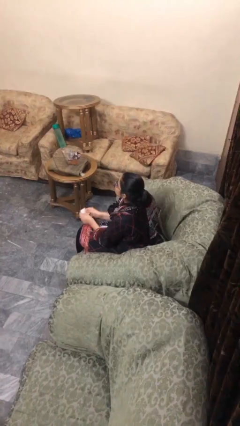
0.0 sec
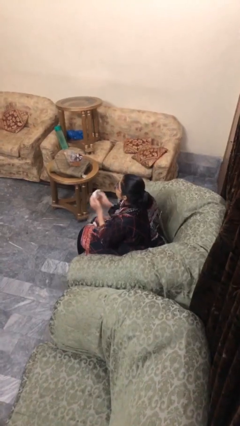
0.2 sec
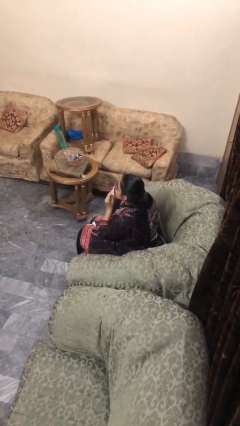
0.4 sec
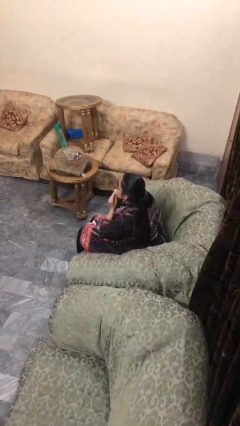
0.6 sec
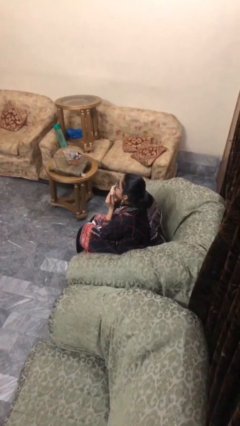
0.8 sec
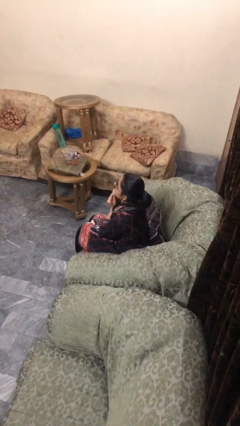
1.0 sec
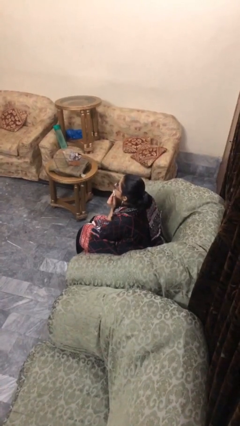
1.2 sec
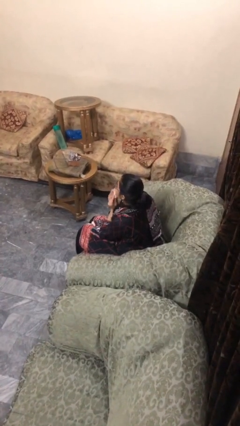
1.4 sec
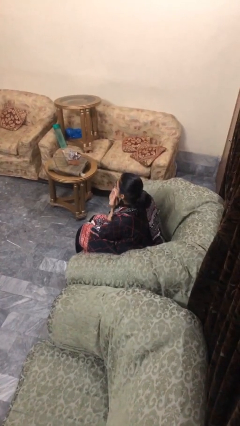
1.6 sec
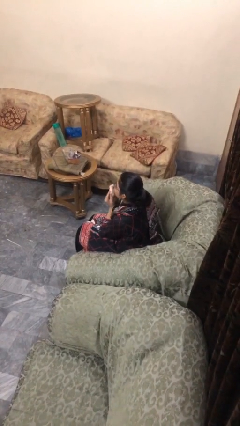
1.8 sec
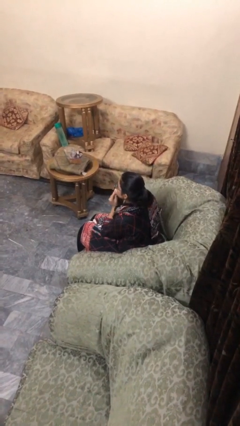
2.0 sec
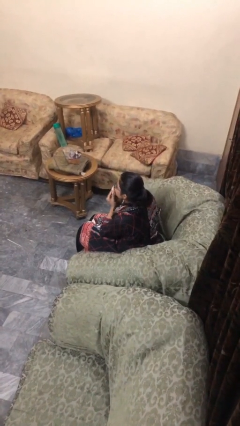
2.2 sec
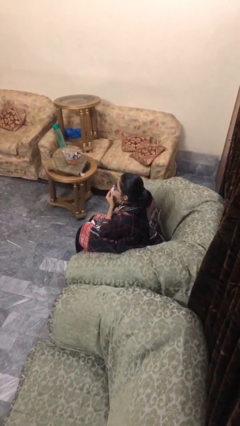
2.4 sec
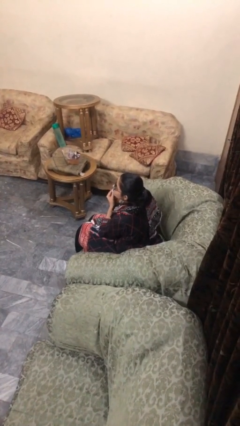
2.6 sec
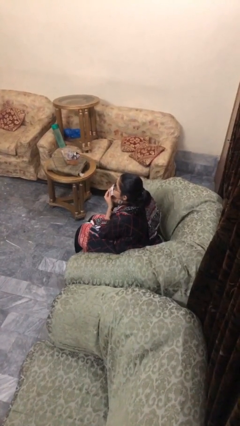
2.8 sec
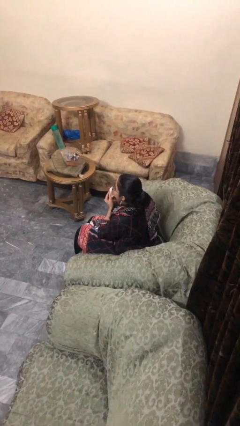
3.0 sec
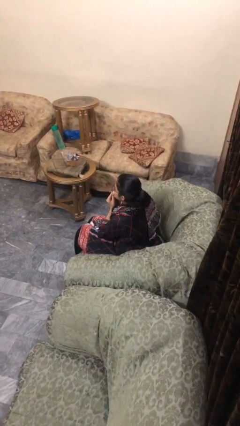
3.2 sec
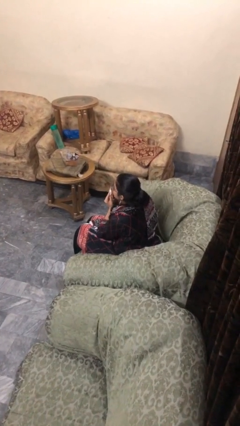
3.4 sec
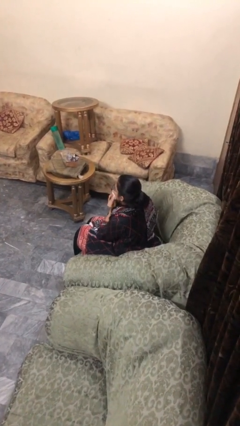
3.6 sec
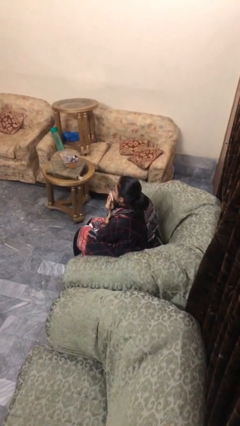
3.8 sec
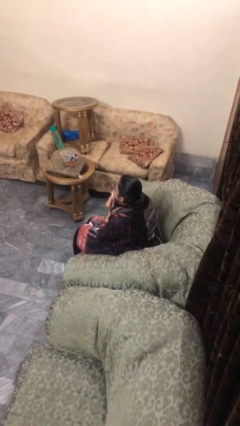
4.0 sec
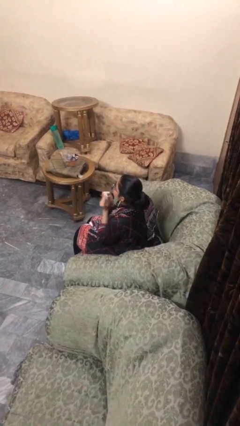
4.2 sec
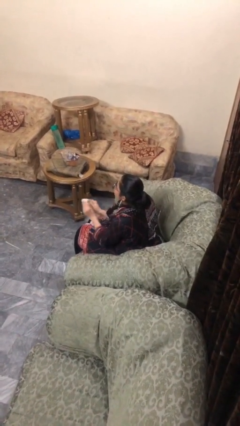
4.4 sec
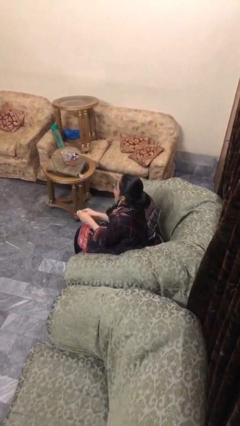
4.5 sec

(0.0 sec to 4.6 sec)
person wipes mouth with napkin

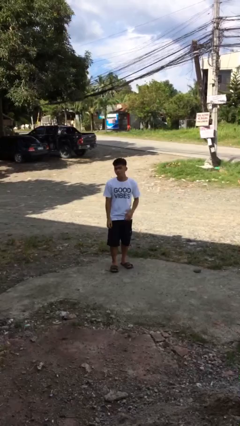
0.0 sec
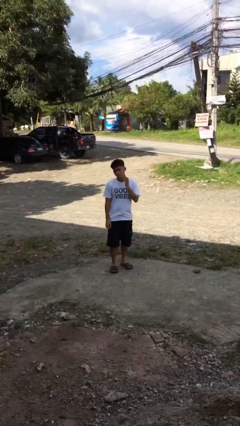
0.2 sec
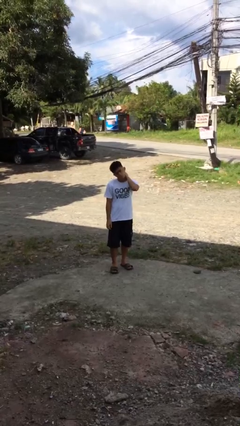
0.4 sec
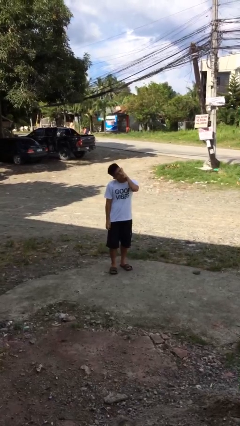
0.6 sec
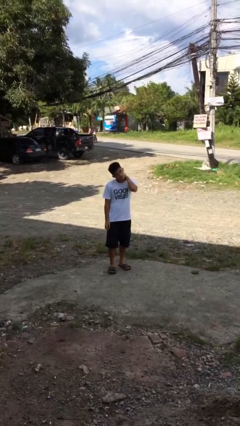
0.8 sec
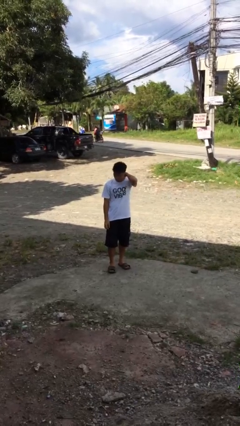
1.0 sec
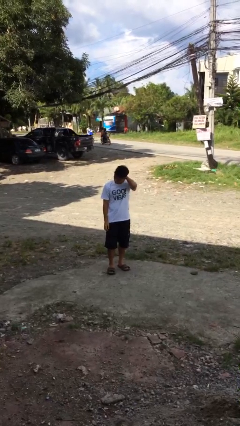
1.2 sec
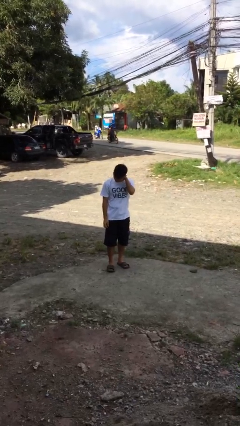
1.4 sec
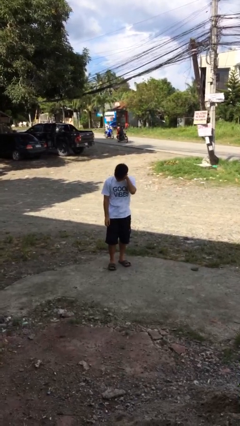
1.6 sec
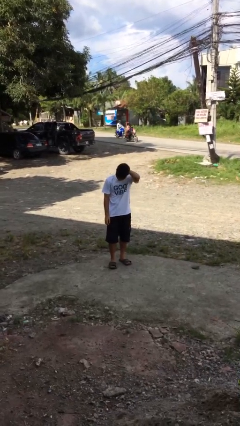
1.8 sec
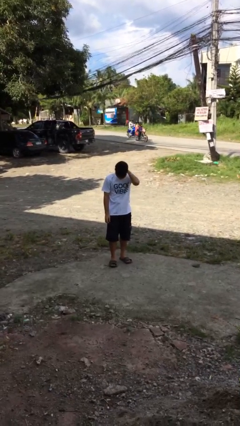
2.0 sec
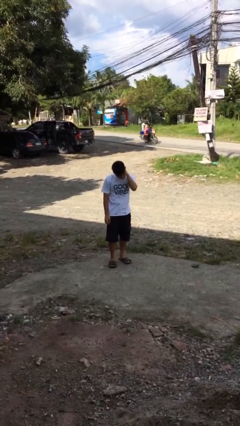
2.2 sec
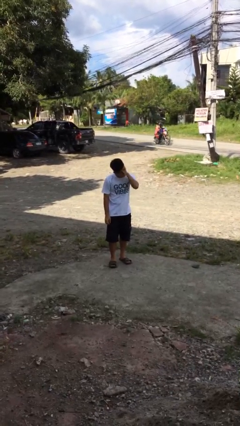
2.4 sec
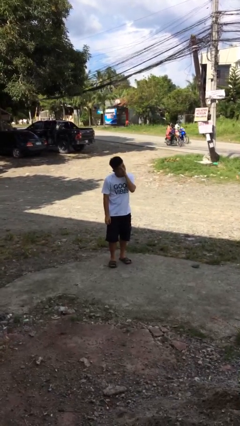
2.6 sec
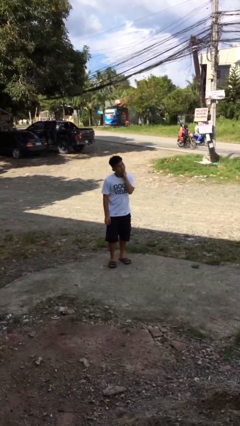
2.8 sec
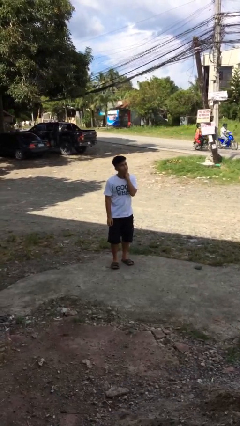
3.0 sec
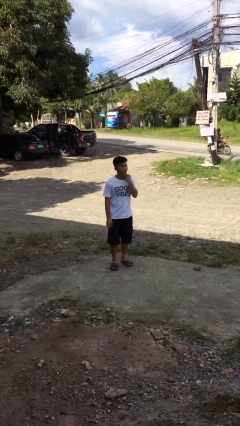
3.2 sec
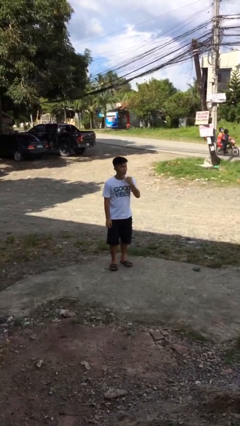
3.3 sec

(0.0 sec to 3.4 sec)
person rubs neck

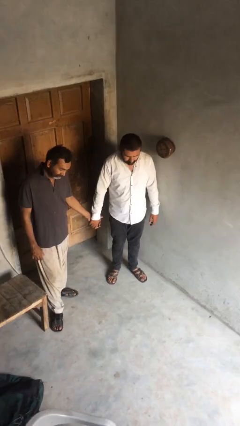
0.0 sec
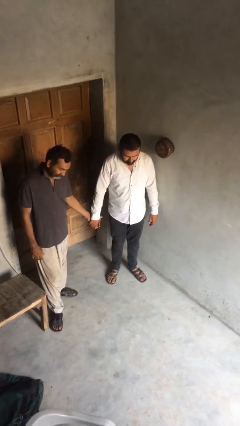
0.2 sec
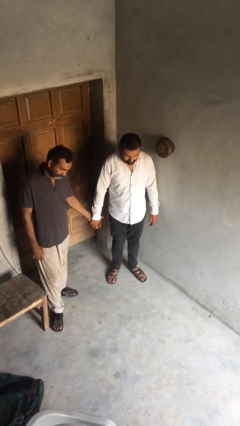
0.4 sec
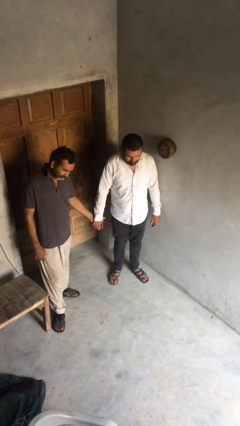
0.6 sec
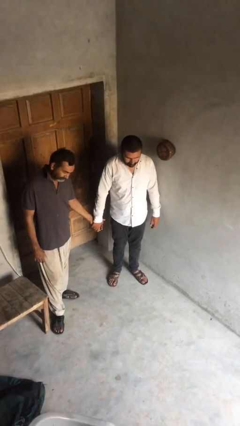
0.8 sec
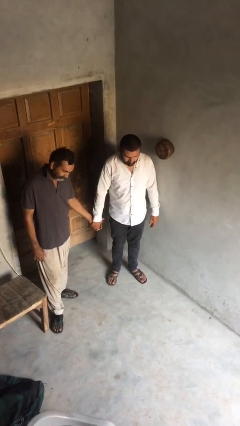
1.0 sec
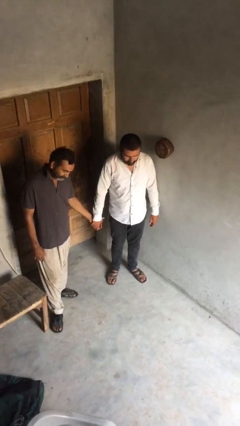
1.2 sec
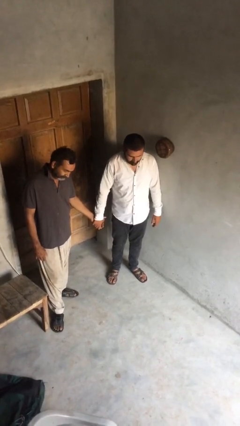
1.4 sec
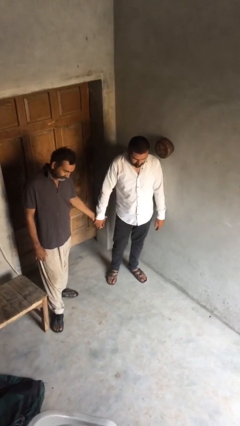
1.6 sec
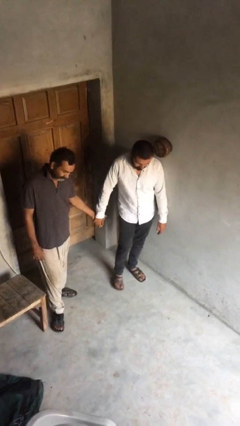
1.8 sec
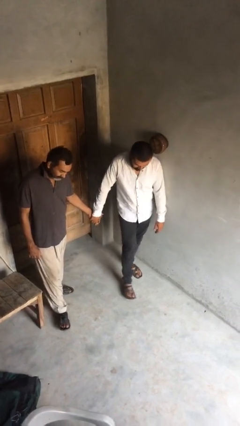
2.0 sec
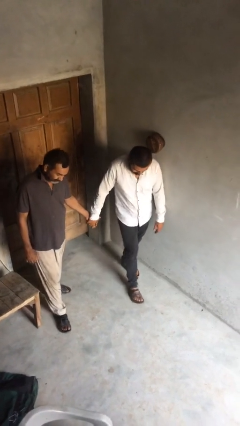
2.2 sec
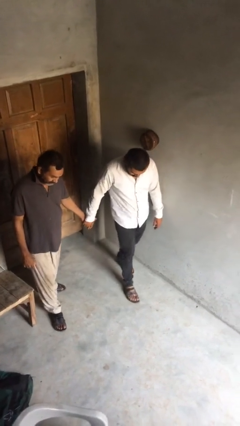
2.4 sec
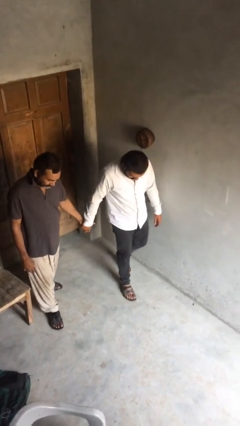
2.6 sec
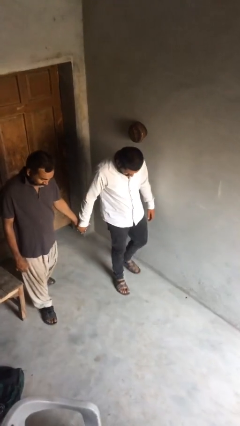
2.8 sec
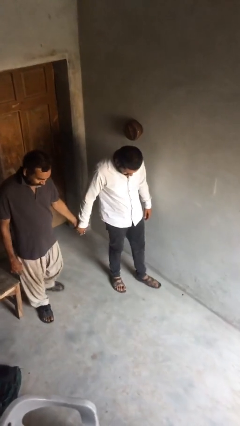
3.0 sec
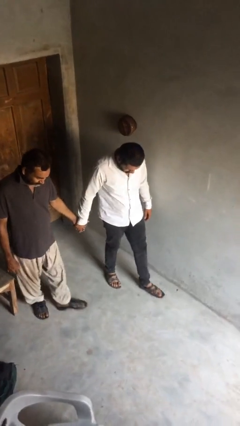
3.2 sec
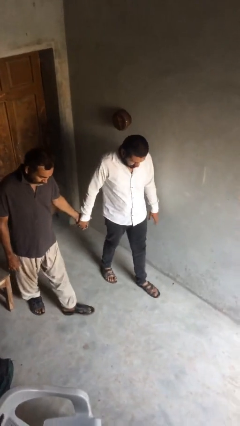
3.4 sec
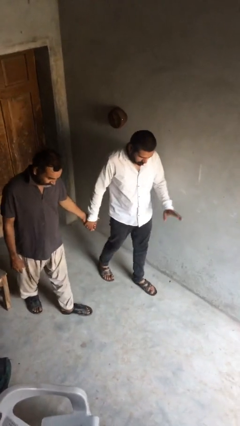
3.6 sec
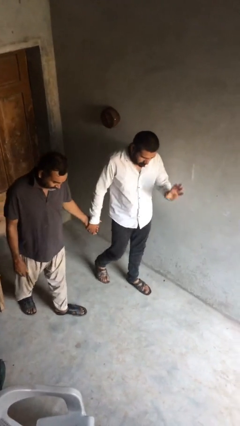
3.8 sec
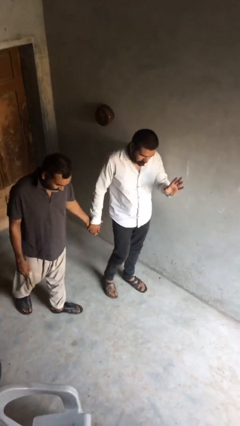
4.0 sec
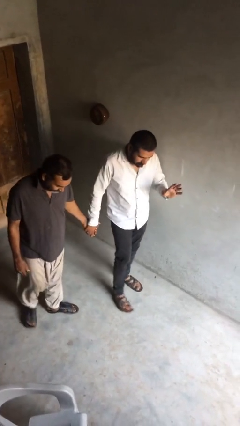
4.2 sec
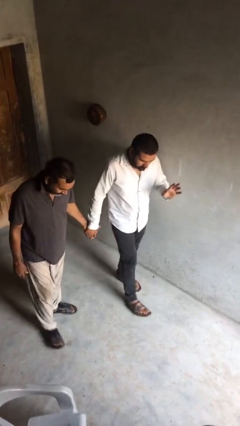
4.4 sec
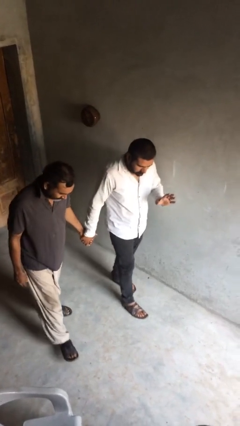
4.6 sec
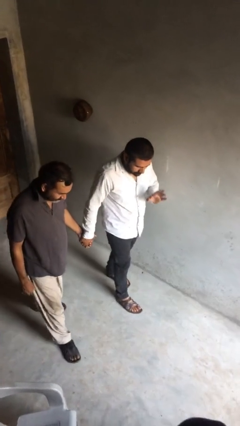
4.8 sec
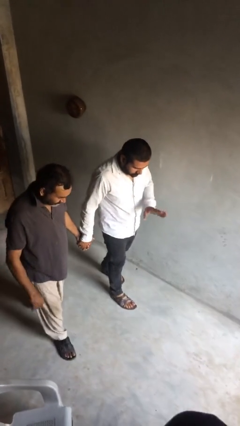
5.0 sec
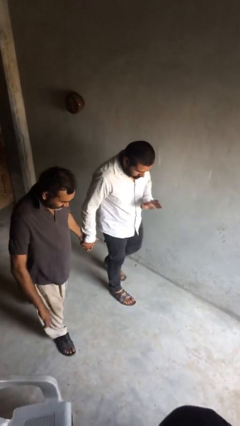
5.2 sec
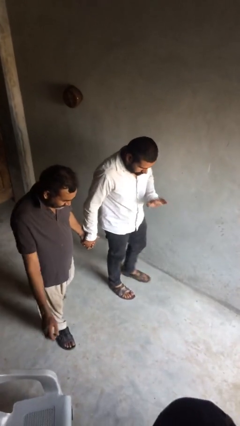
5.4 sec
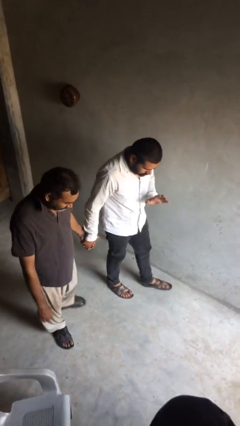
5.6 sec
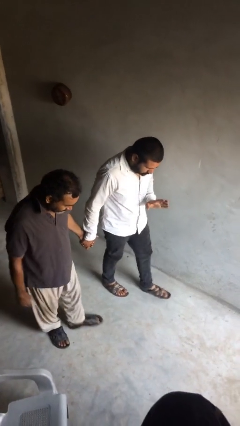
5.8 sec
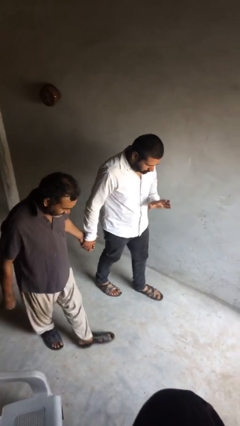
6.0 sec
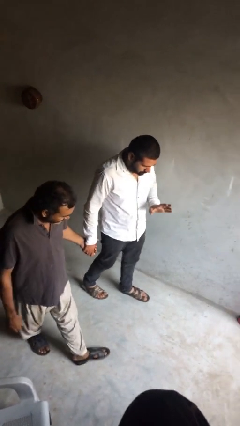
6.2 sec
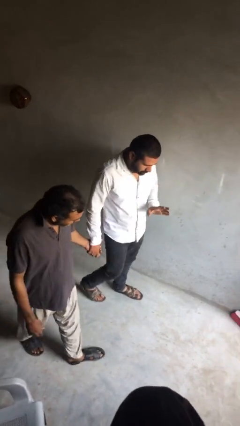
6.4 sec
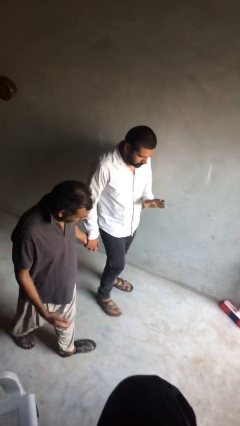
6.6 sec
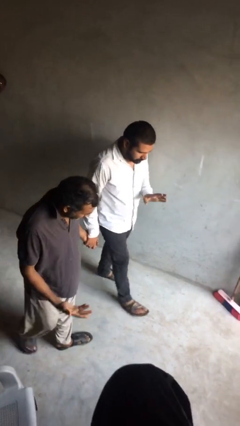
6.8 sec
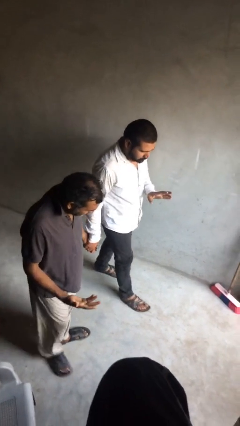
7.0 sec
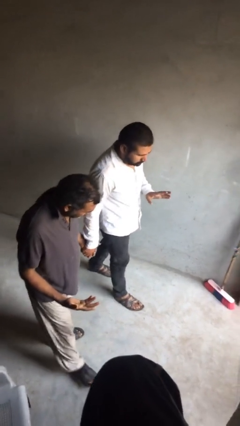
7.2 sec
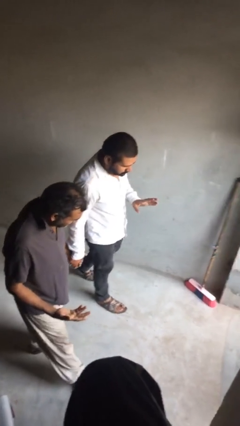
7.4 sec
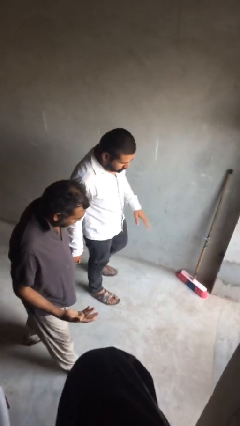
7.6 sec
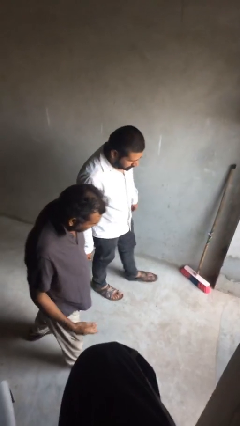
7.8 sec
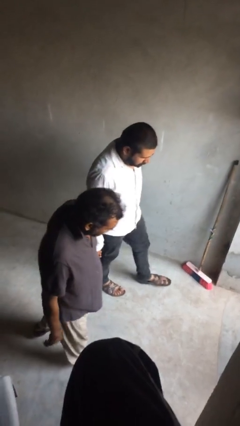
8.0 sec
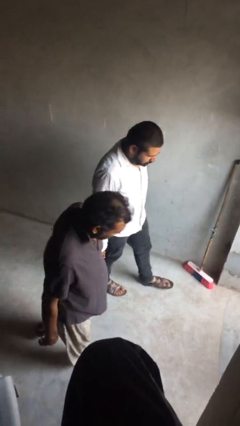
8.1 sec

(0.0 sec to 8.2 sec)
person holds hand

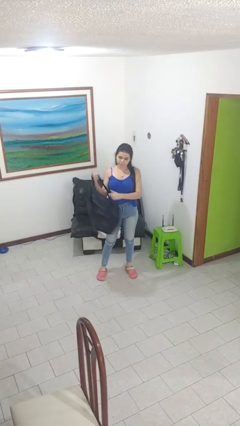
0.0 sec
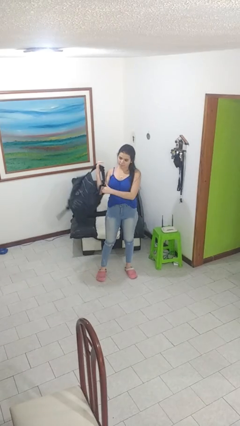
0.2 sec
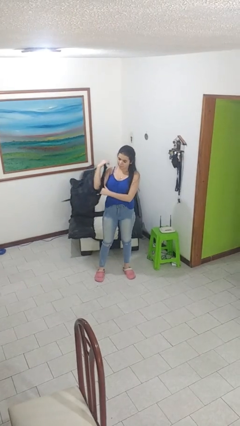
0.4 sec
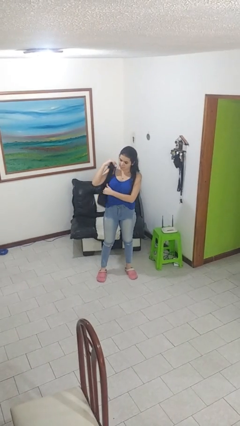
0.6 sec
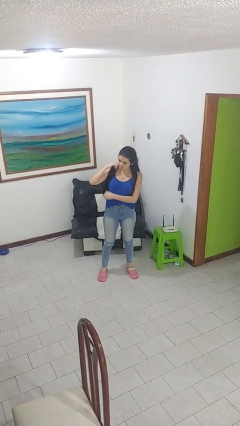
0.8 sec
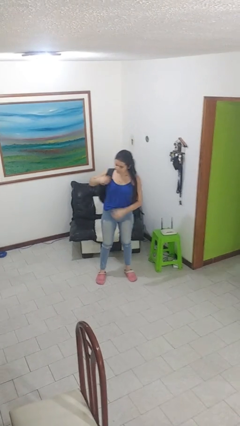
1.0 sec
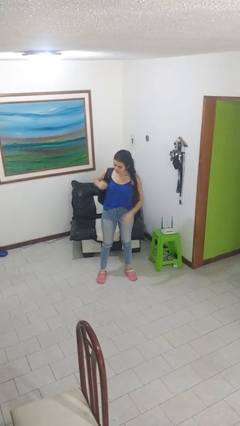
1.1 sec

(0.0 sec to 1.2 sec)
person puts on backpack

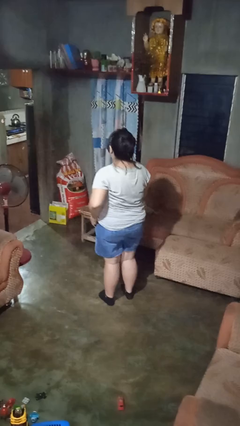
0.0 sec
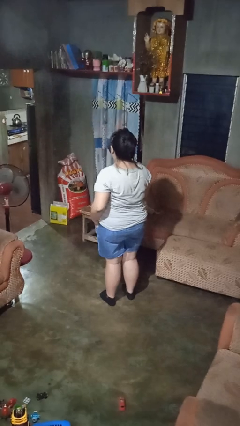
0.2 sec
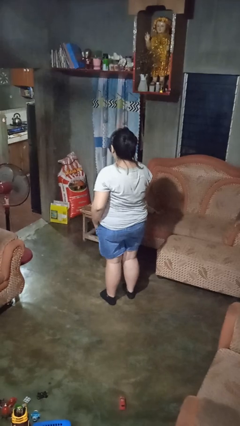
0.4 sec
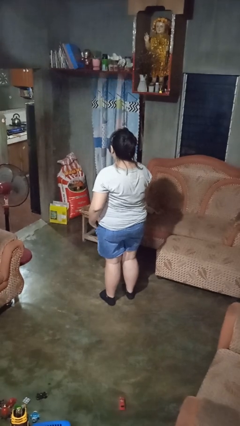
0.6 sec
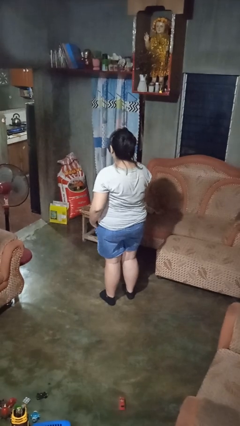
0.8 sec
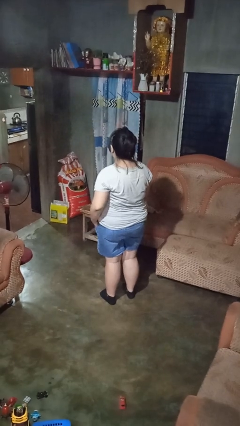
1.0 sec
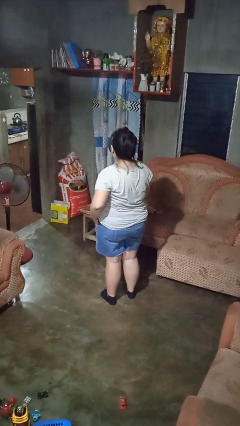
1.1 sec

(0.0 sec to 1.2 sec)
person puts hands in back pockets
